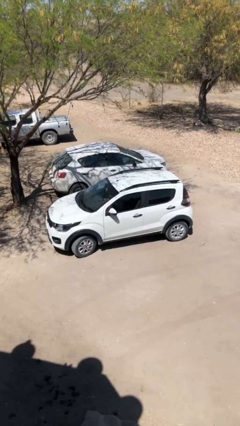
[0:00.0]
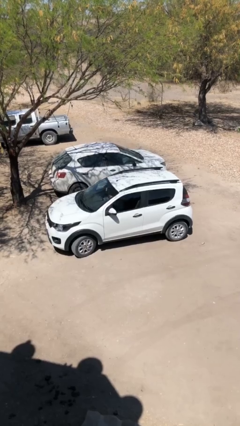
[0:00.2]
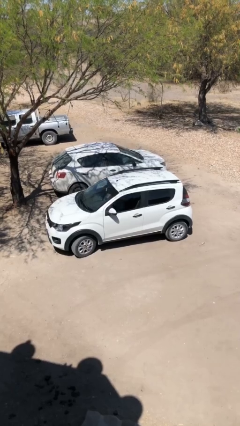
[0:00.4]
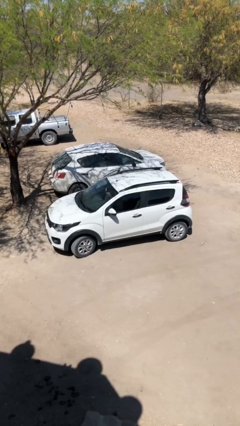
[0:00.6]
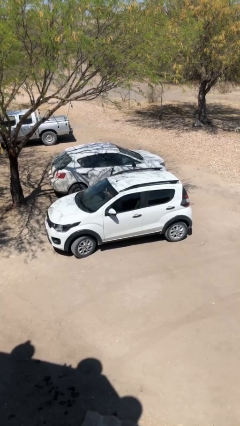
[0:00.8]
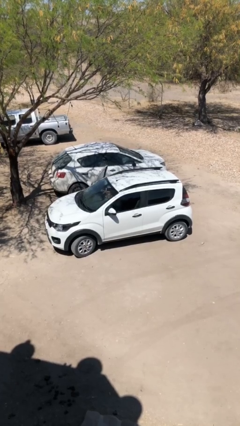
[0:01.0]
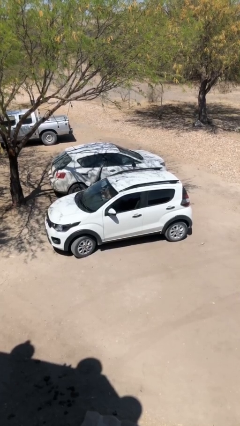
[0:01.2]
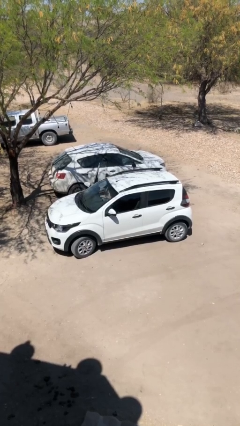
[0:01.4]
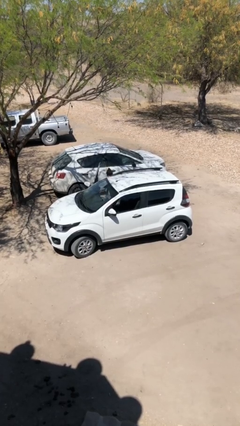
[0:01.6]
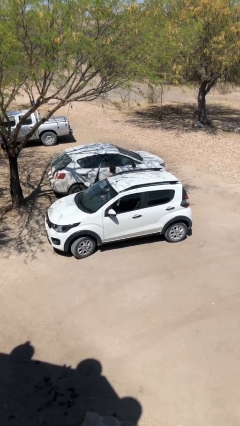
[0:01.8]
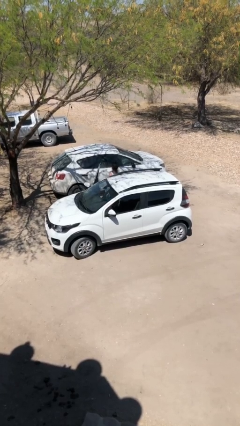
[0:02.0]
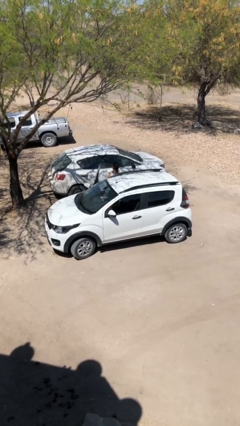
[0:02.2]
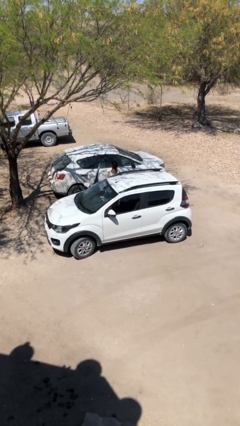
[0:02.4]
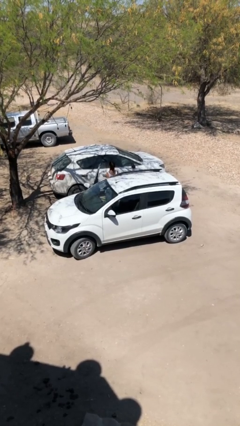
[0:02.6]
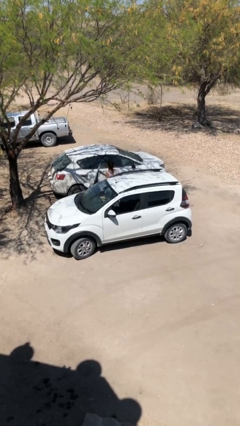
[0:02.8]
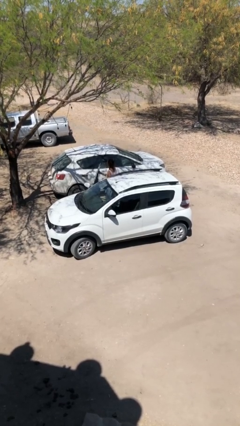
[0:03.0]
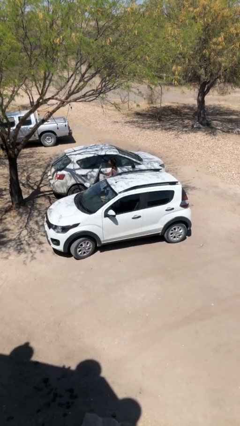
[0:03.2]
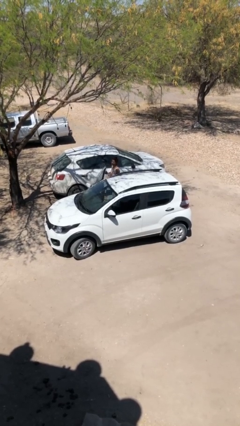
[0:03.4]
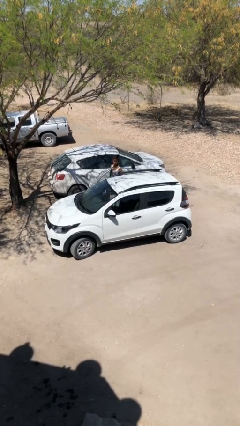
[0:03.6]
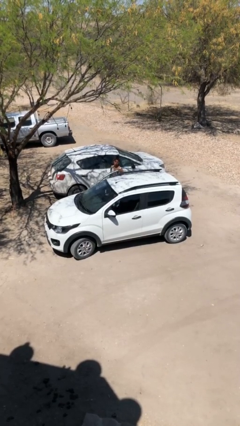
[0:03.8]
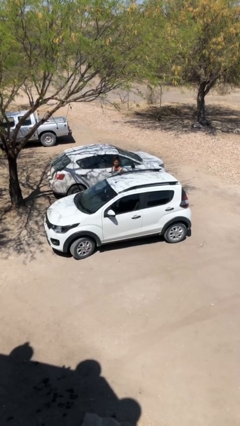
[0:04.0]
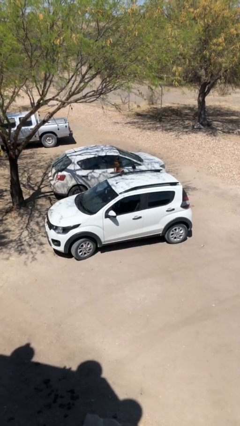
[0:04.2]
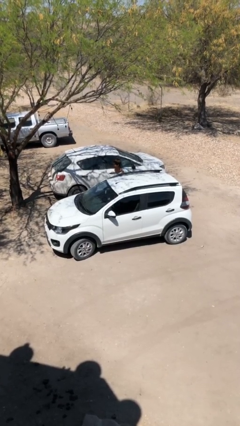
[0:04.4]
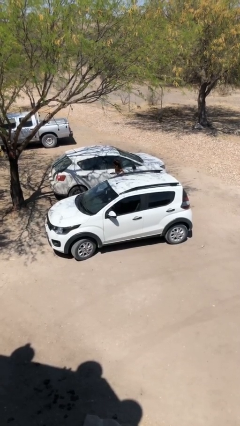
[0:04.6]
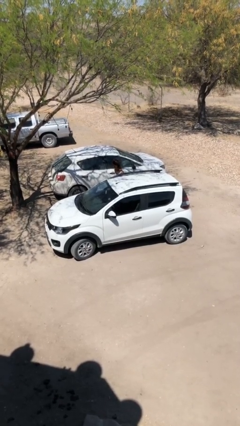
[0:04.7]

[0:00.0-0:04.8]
car drops off person

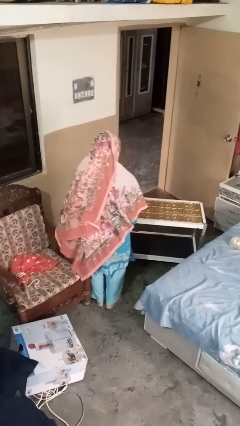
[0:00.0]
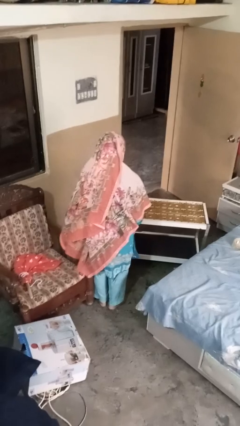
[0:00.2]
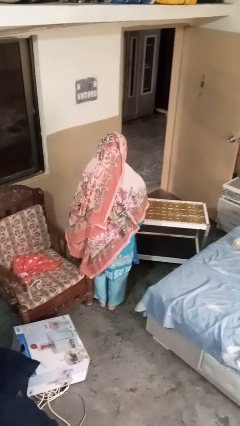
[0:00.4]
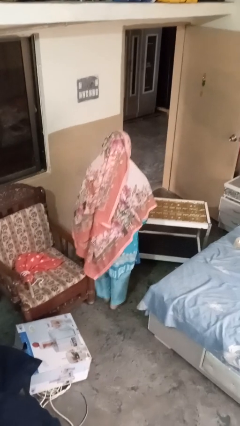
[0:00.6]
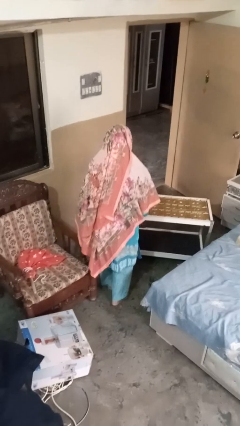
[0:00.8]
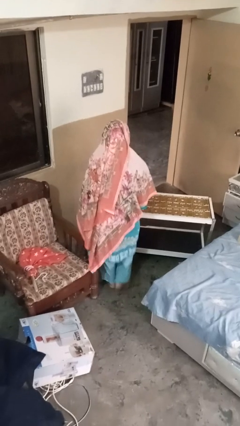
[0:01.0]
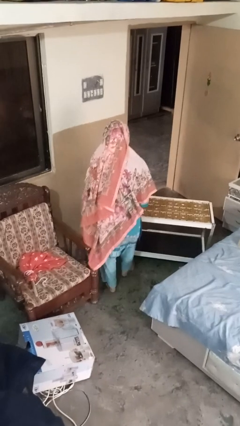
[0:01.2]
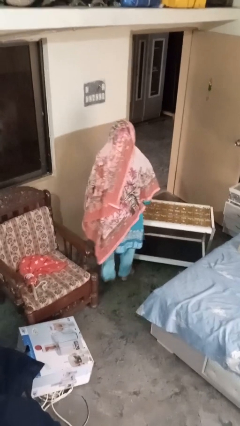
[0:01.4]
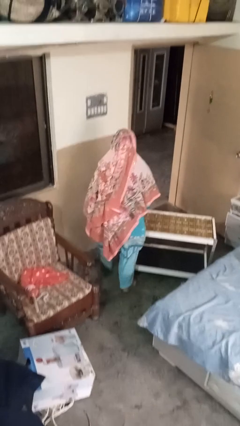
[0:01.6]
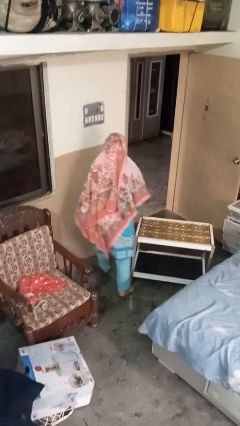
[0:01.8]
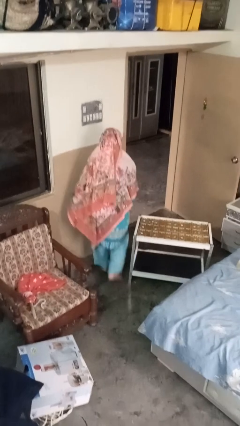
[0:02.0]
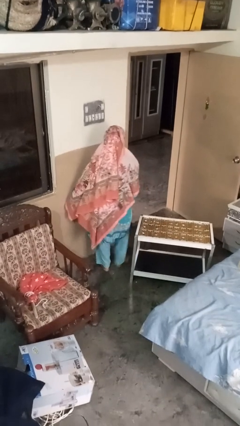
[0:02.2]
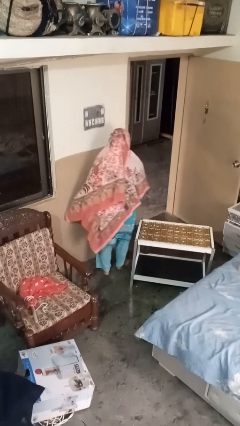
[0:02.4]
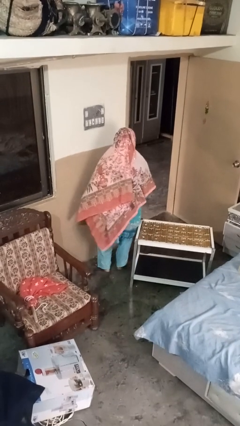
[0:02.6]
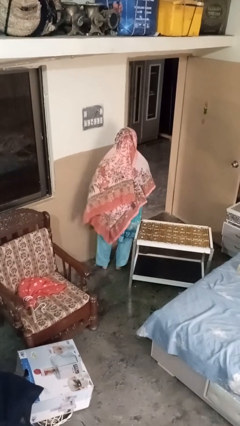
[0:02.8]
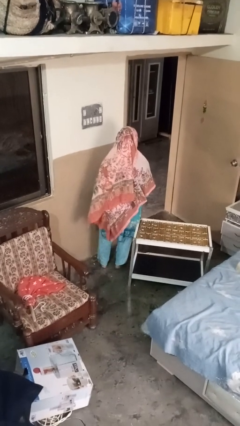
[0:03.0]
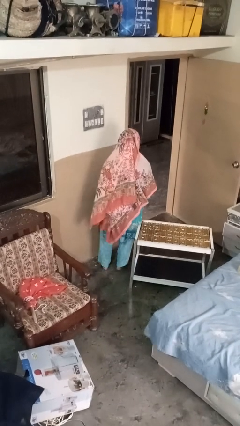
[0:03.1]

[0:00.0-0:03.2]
person bumps into table

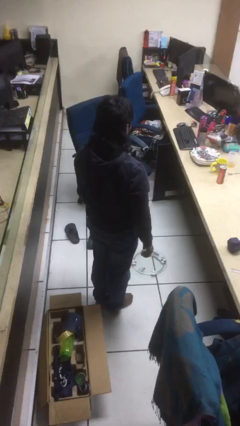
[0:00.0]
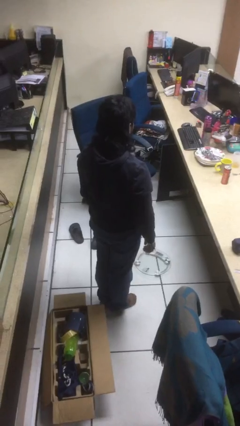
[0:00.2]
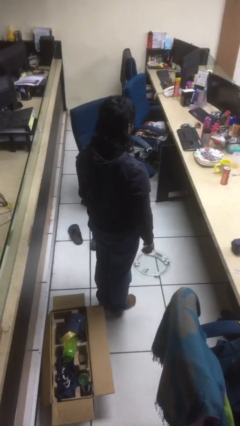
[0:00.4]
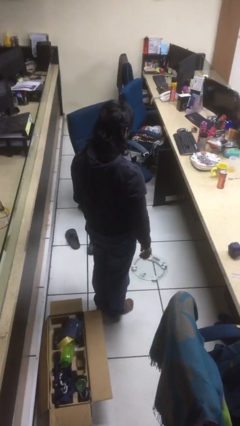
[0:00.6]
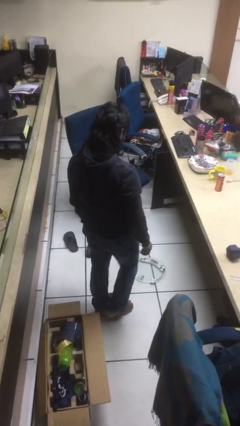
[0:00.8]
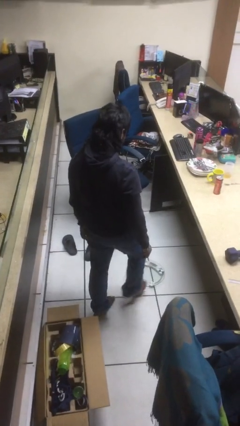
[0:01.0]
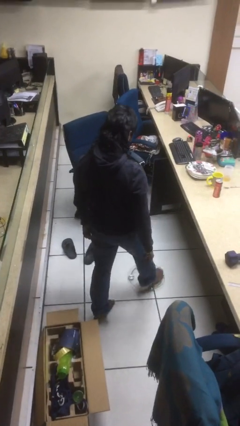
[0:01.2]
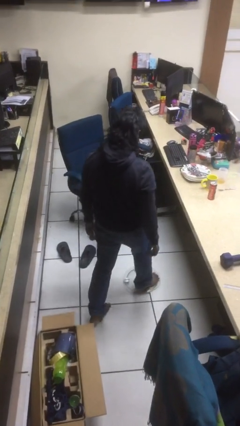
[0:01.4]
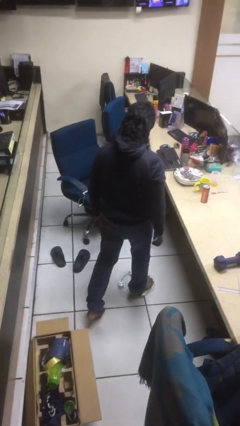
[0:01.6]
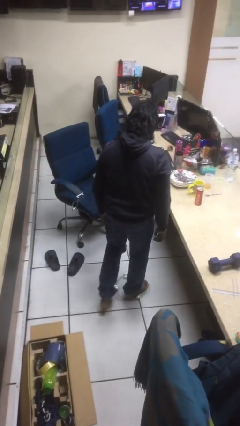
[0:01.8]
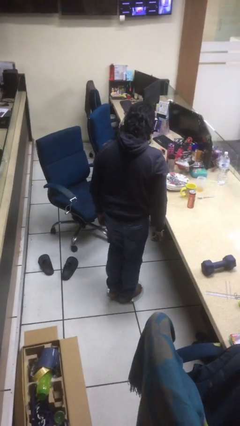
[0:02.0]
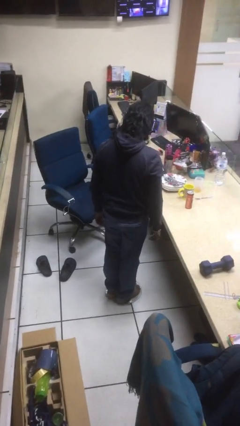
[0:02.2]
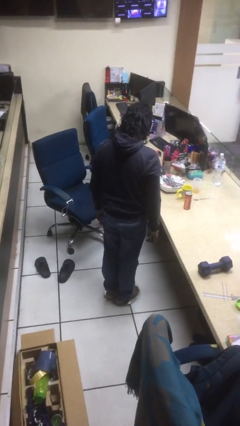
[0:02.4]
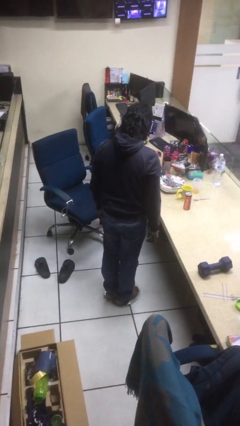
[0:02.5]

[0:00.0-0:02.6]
person uses bodyweight scale

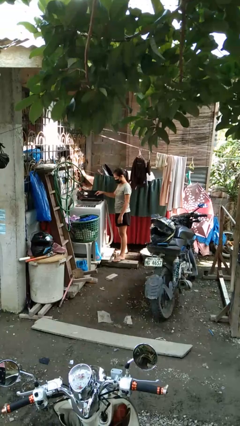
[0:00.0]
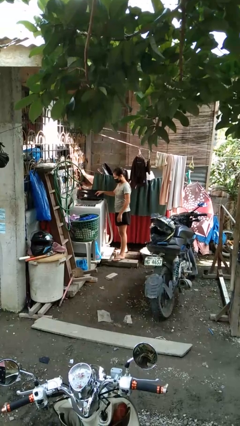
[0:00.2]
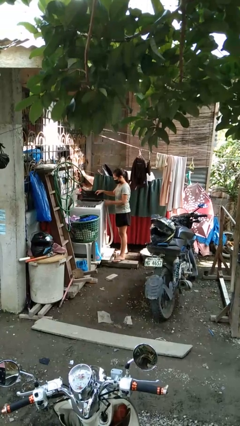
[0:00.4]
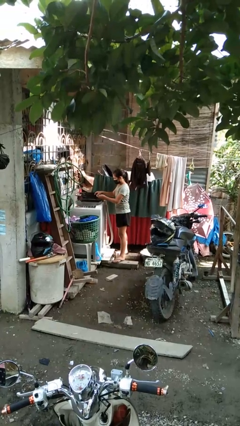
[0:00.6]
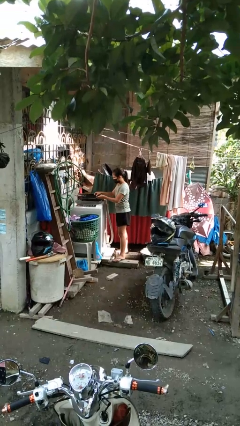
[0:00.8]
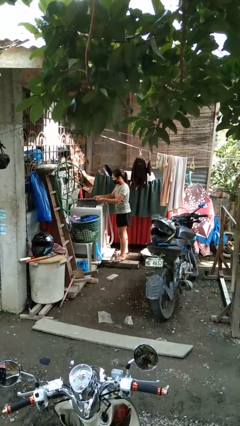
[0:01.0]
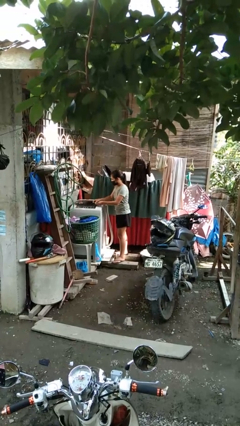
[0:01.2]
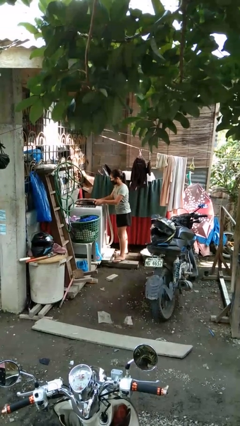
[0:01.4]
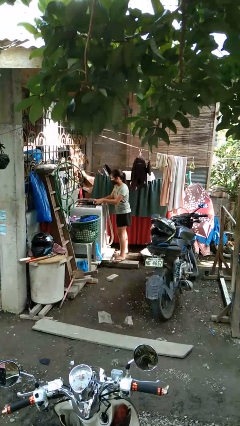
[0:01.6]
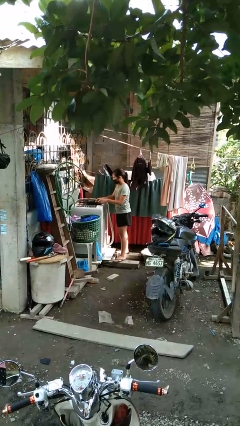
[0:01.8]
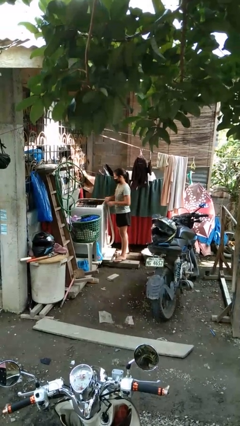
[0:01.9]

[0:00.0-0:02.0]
person closes clothes washer

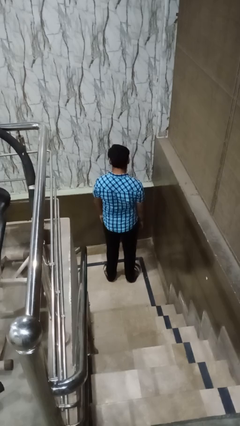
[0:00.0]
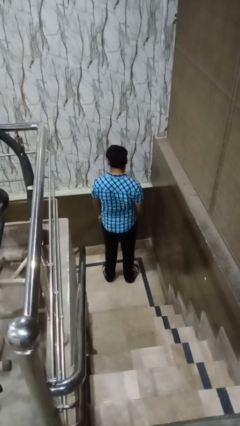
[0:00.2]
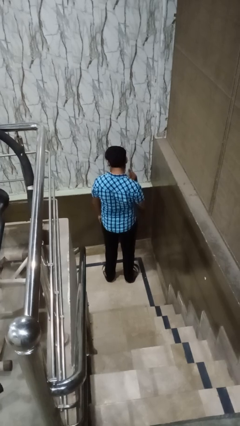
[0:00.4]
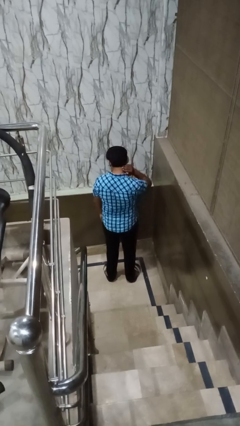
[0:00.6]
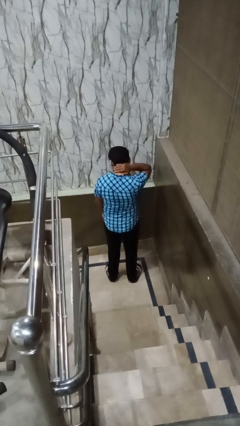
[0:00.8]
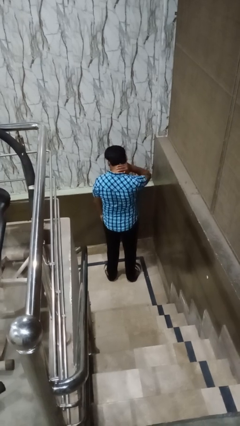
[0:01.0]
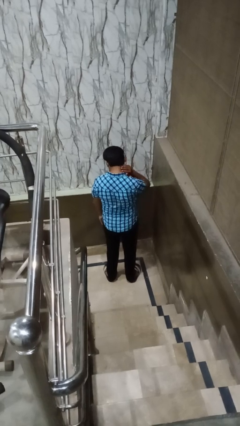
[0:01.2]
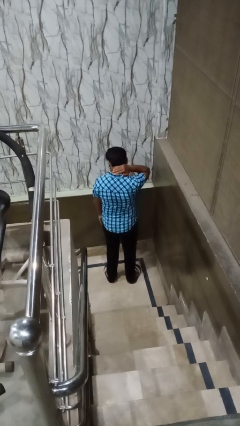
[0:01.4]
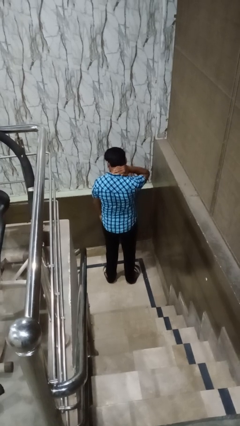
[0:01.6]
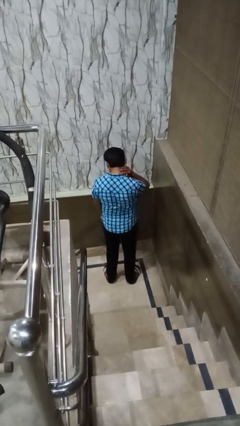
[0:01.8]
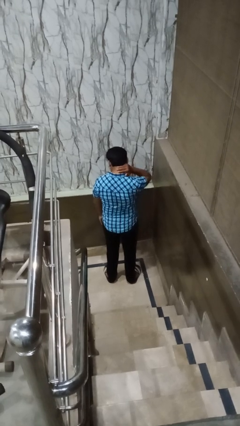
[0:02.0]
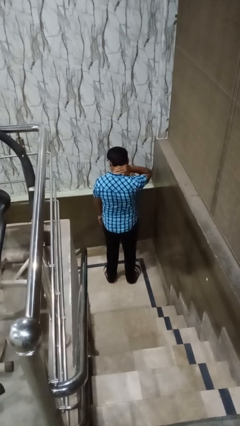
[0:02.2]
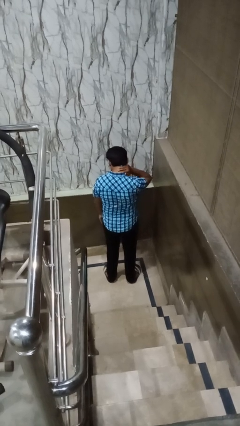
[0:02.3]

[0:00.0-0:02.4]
person rubs neck

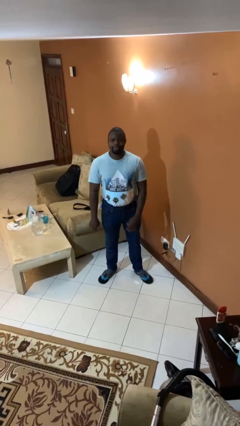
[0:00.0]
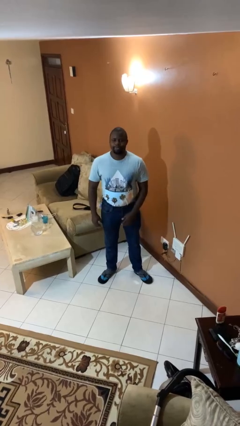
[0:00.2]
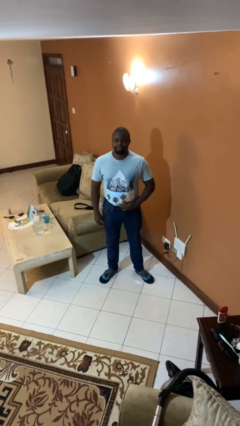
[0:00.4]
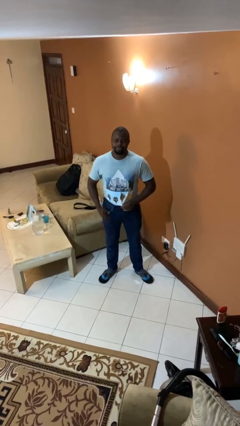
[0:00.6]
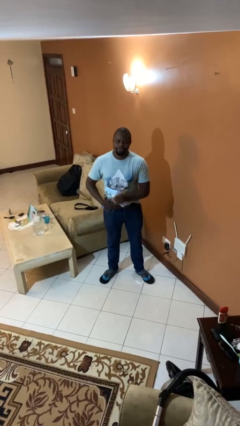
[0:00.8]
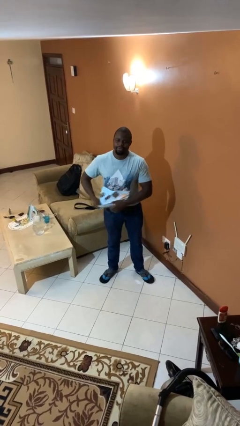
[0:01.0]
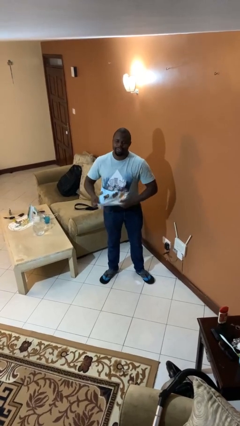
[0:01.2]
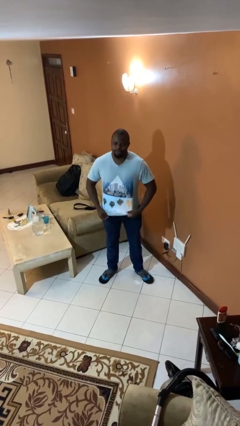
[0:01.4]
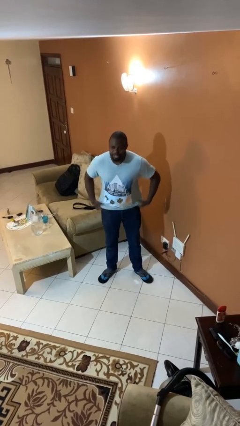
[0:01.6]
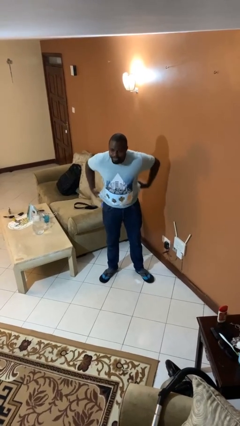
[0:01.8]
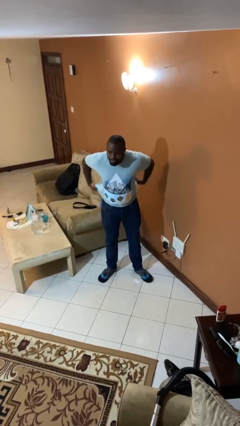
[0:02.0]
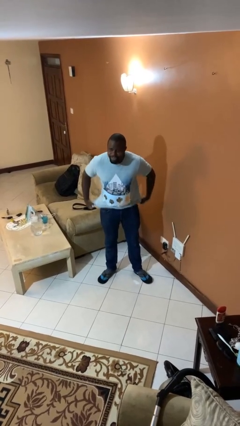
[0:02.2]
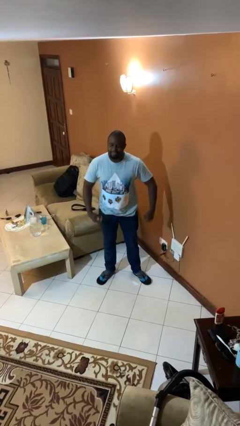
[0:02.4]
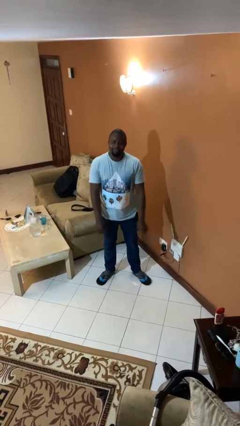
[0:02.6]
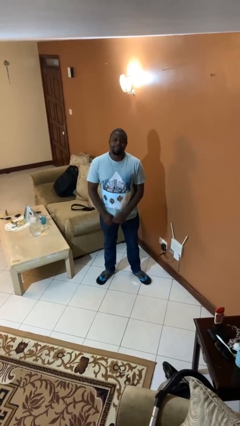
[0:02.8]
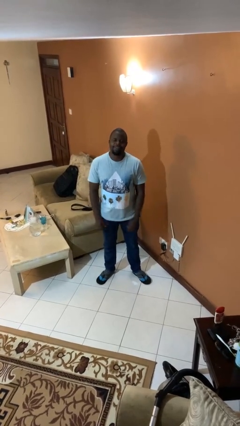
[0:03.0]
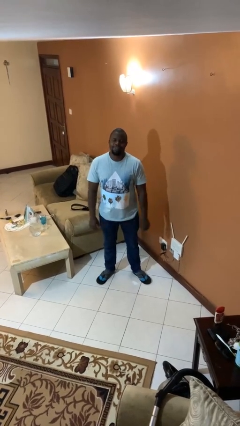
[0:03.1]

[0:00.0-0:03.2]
person untucks shirt
